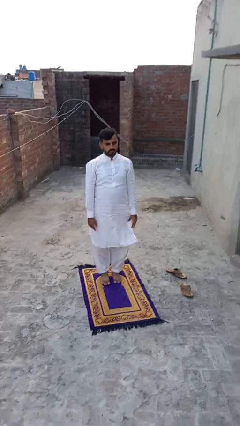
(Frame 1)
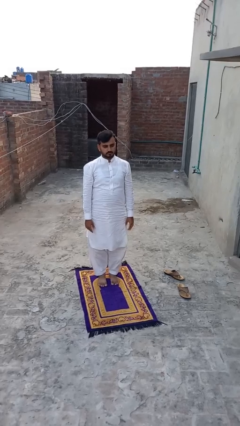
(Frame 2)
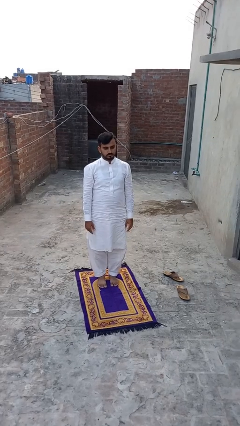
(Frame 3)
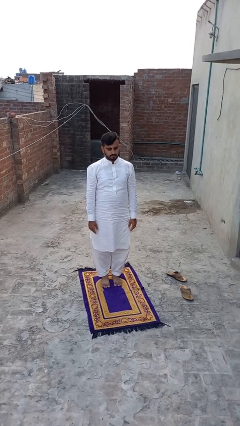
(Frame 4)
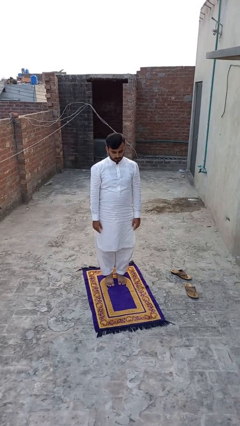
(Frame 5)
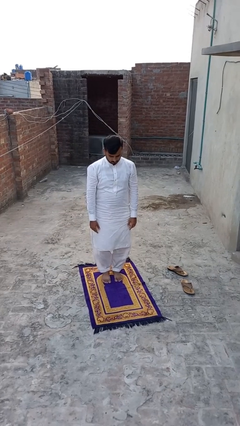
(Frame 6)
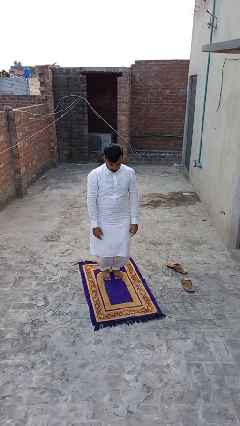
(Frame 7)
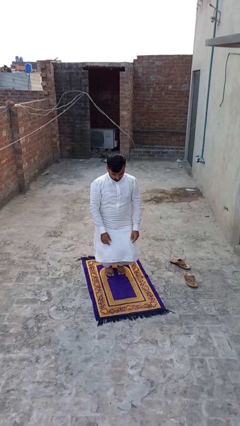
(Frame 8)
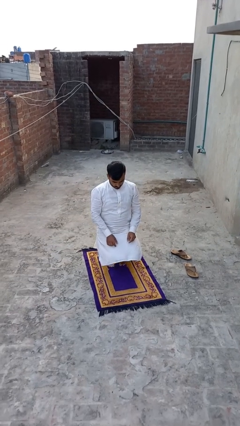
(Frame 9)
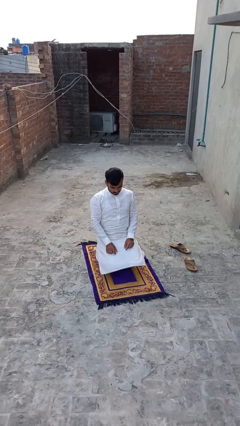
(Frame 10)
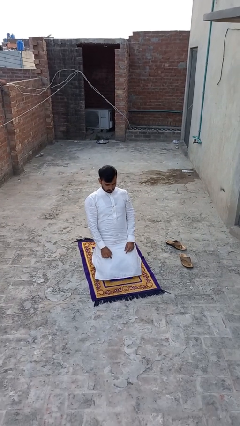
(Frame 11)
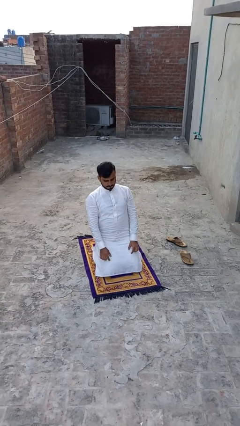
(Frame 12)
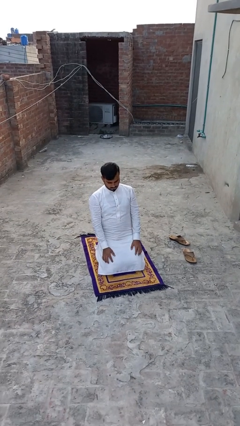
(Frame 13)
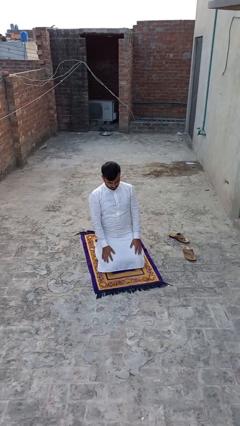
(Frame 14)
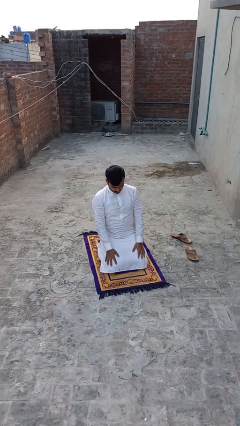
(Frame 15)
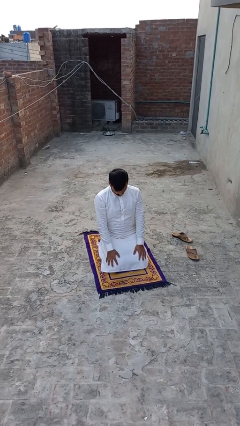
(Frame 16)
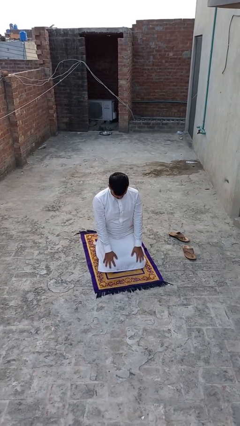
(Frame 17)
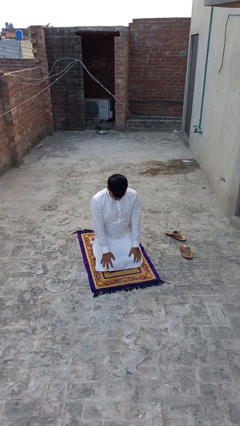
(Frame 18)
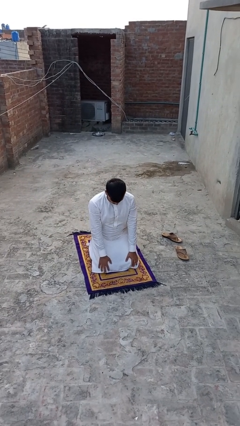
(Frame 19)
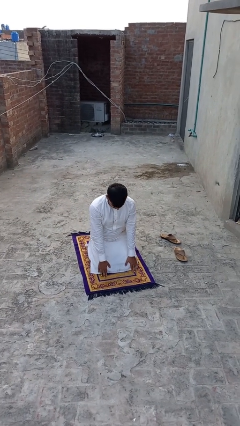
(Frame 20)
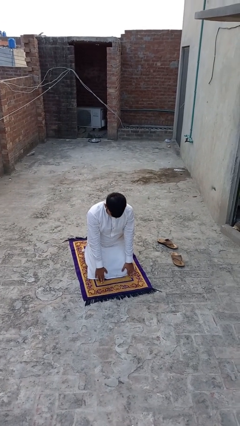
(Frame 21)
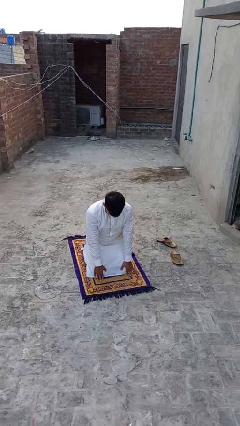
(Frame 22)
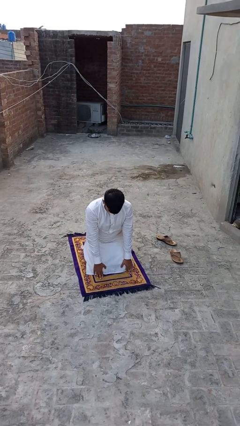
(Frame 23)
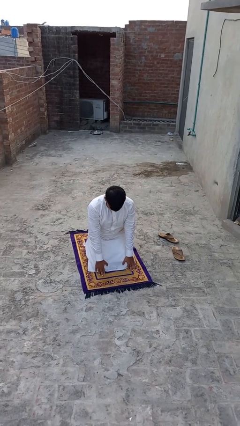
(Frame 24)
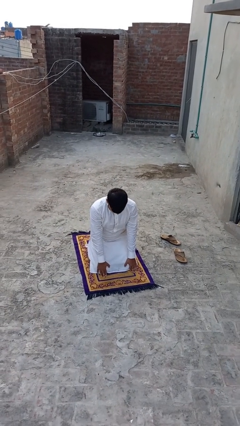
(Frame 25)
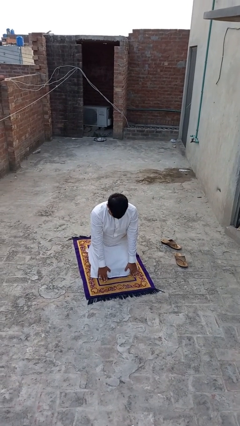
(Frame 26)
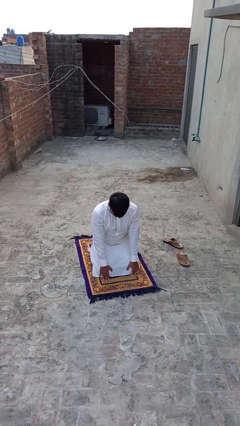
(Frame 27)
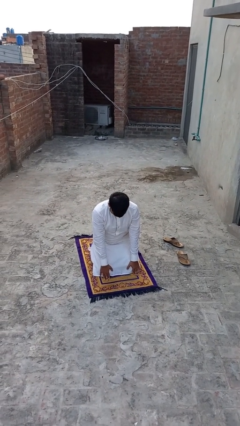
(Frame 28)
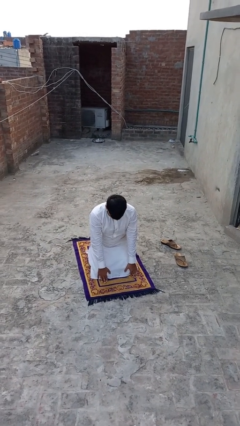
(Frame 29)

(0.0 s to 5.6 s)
person kneels

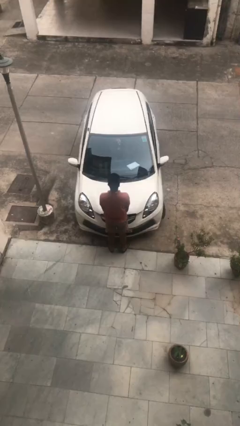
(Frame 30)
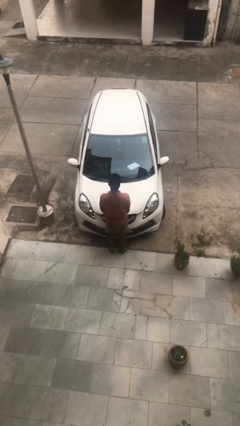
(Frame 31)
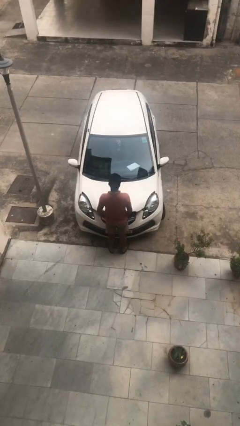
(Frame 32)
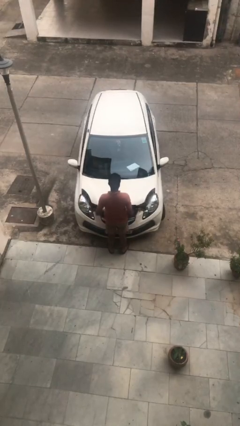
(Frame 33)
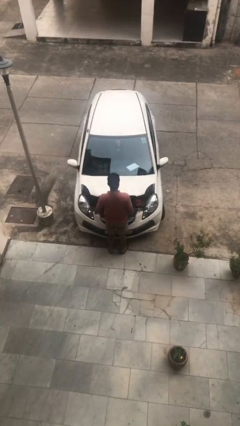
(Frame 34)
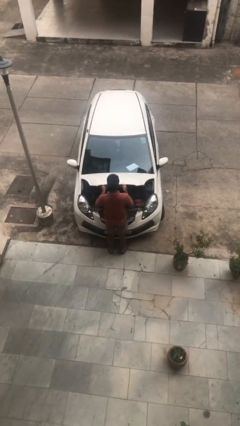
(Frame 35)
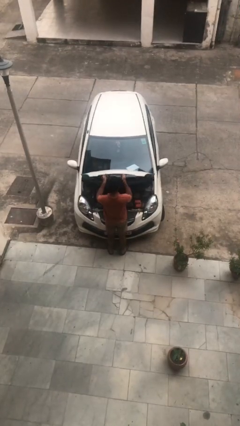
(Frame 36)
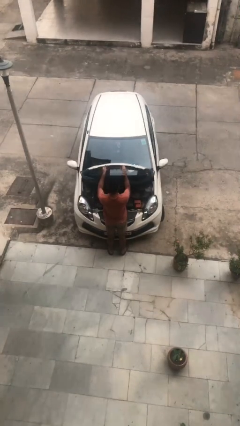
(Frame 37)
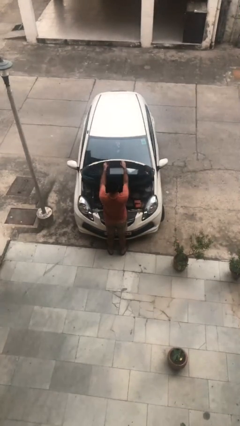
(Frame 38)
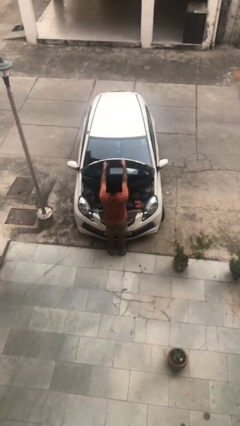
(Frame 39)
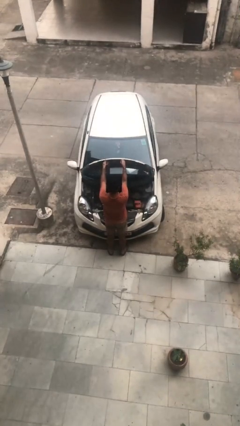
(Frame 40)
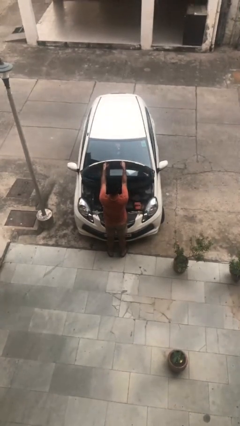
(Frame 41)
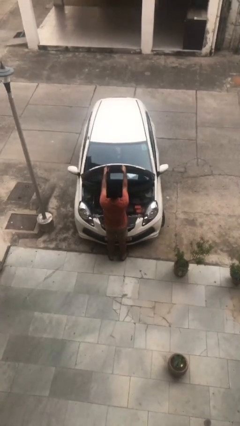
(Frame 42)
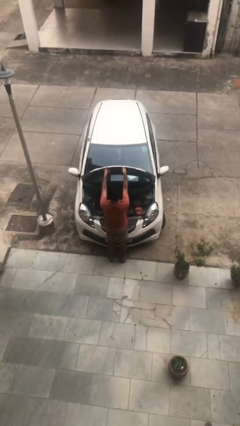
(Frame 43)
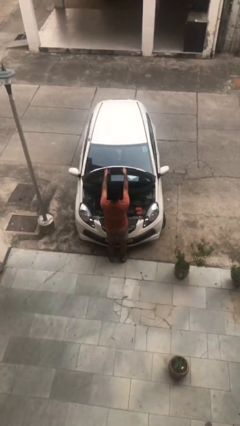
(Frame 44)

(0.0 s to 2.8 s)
person opens car hood

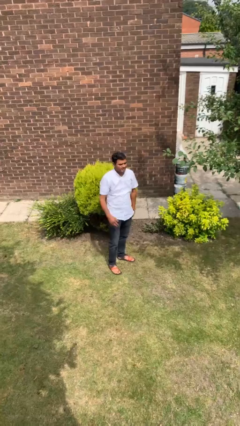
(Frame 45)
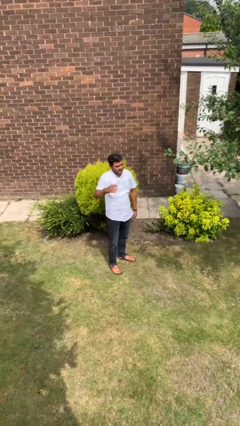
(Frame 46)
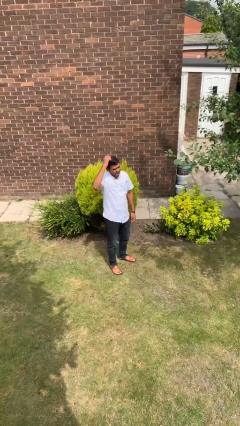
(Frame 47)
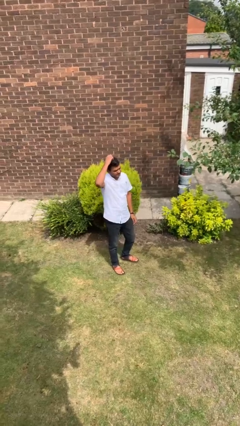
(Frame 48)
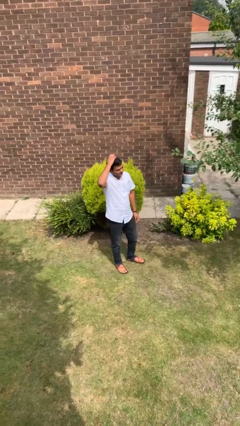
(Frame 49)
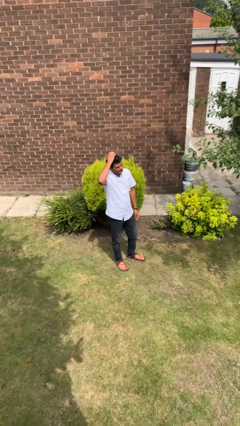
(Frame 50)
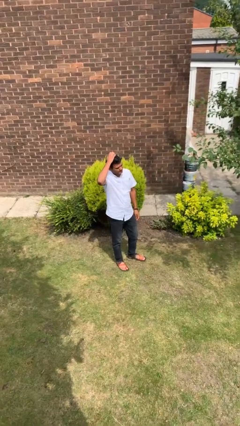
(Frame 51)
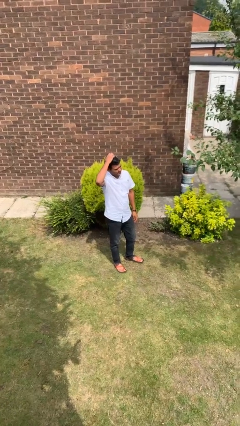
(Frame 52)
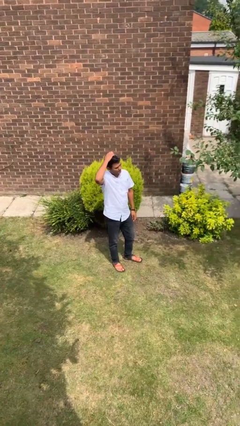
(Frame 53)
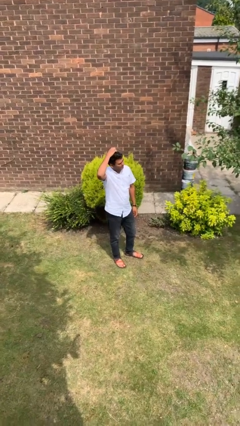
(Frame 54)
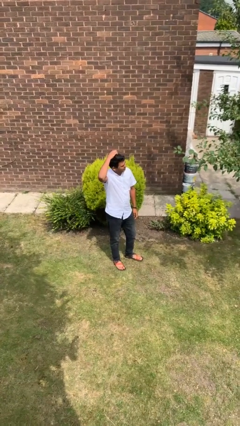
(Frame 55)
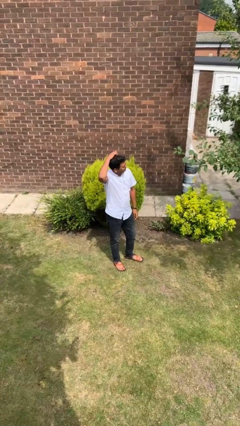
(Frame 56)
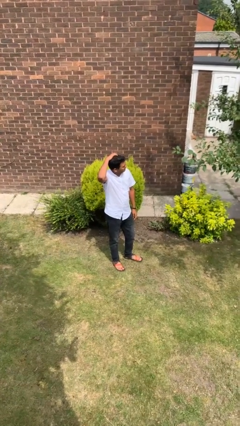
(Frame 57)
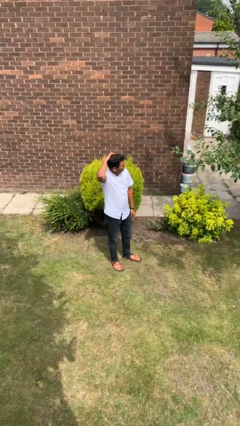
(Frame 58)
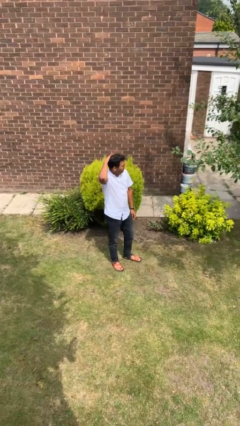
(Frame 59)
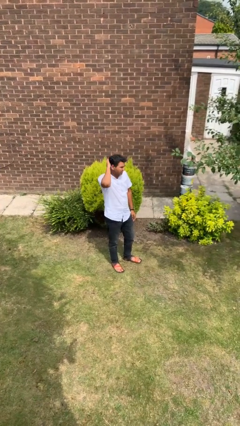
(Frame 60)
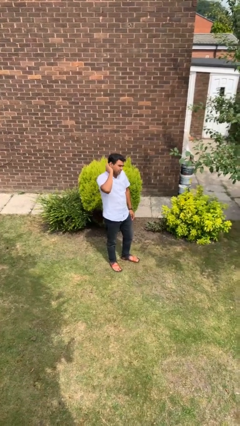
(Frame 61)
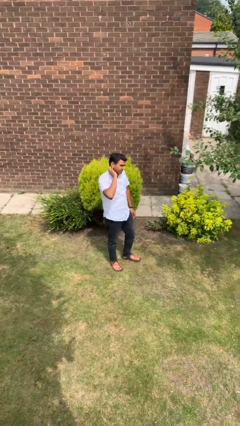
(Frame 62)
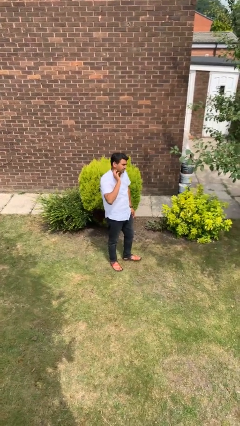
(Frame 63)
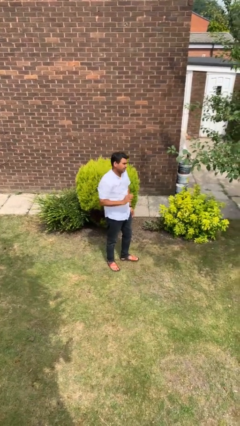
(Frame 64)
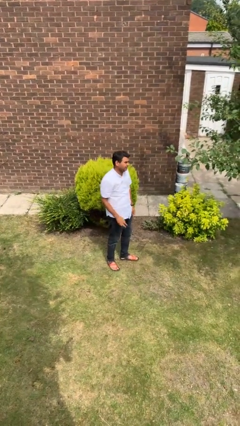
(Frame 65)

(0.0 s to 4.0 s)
person scratches face

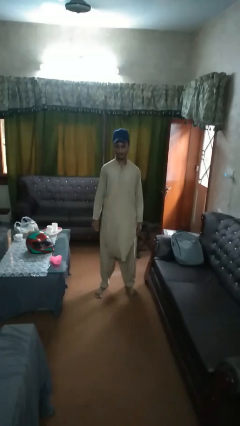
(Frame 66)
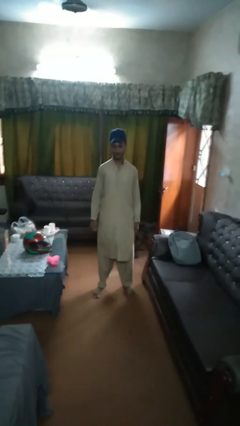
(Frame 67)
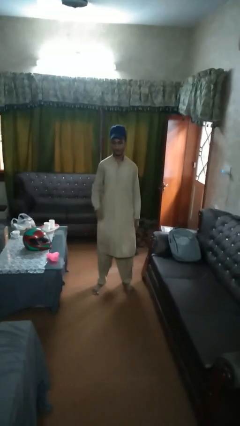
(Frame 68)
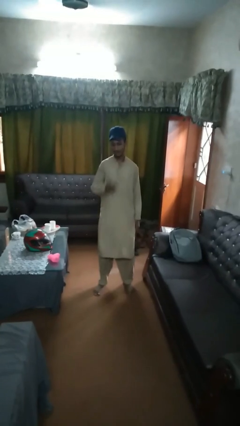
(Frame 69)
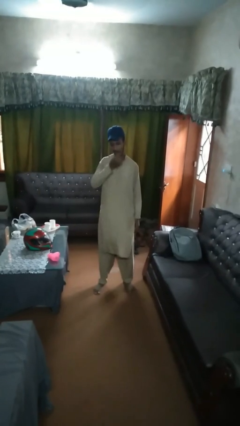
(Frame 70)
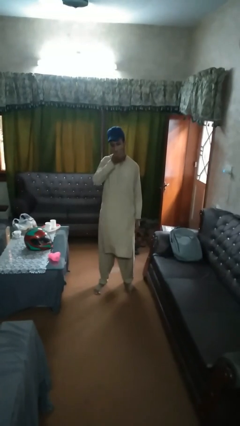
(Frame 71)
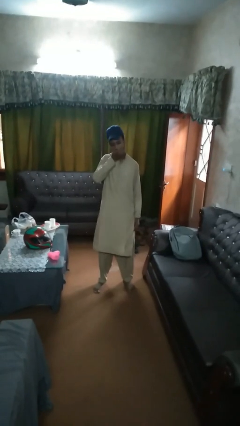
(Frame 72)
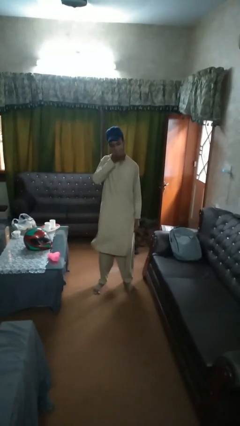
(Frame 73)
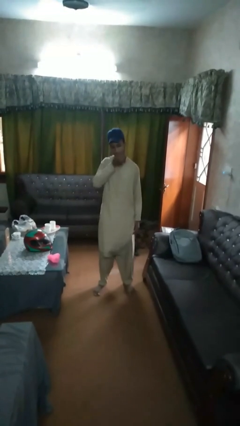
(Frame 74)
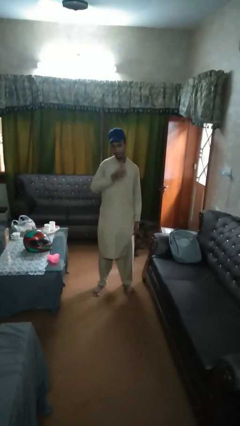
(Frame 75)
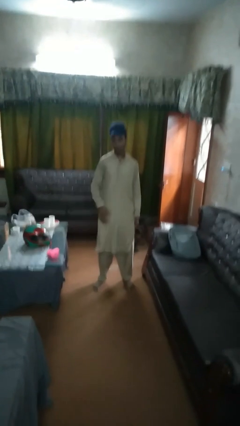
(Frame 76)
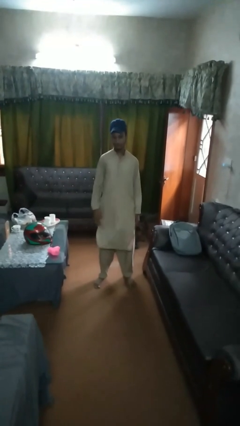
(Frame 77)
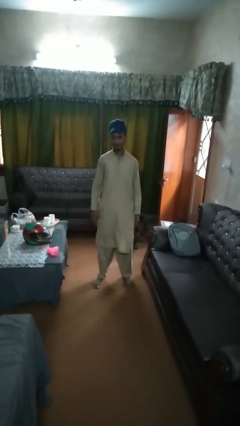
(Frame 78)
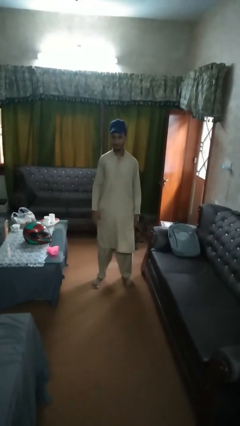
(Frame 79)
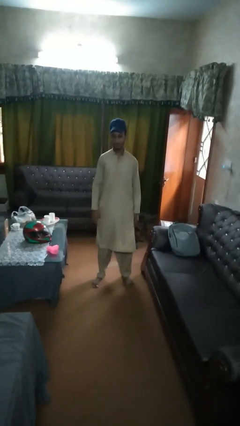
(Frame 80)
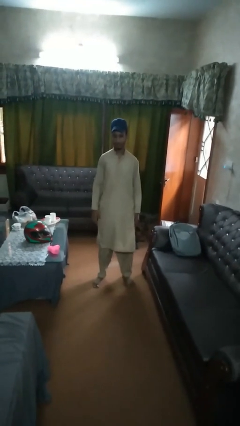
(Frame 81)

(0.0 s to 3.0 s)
person eats apple

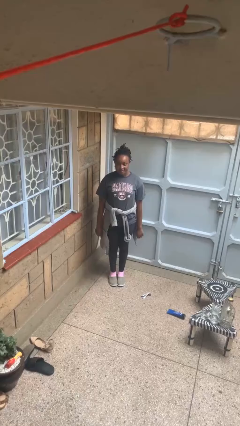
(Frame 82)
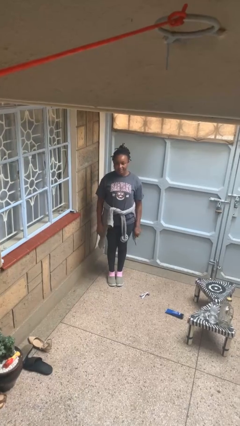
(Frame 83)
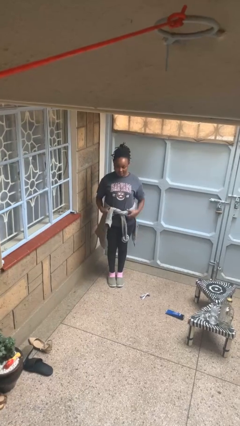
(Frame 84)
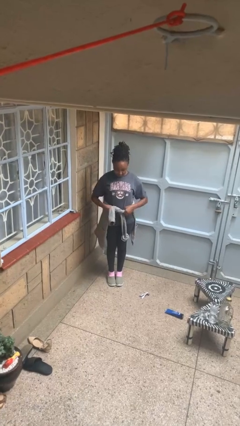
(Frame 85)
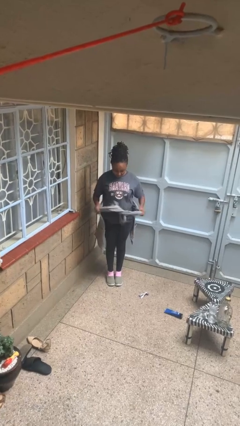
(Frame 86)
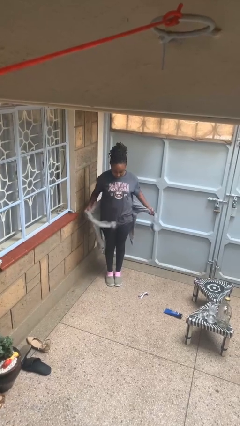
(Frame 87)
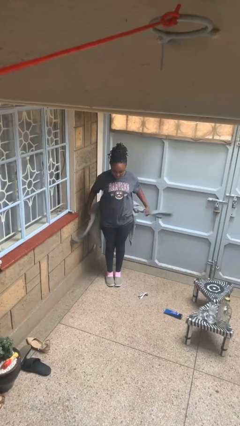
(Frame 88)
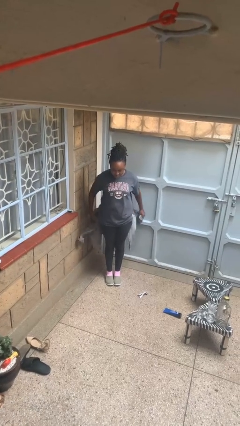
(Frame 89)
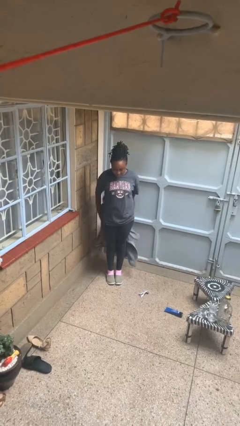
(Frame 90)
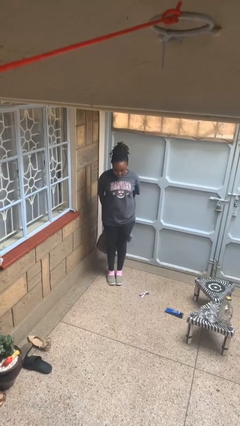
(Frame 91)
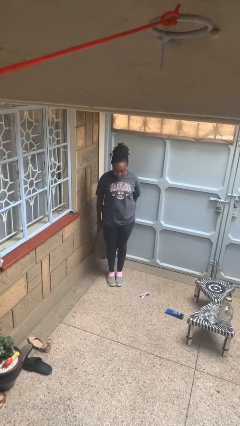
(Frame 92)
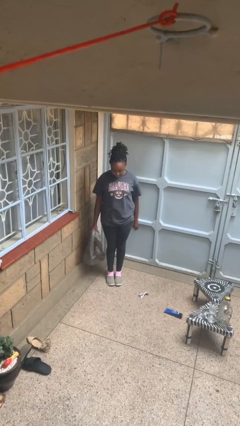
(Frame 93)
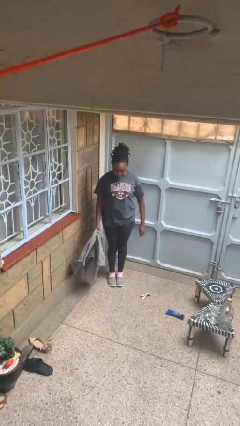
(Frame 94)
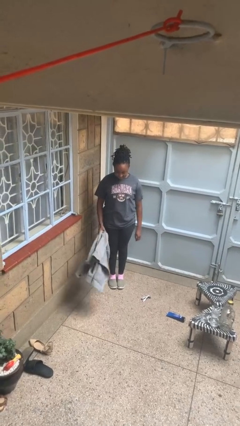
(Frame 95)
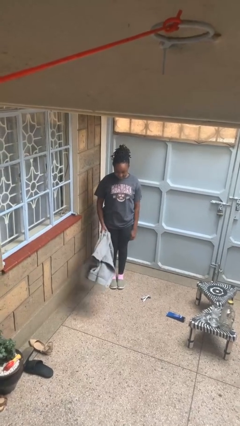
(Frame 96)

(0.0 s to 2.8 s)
person unties jacket around waist
